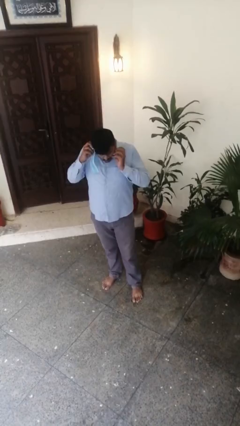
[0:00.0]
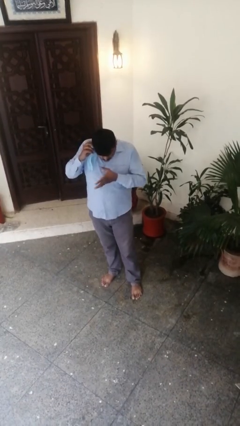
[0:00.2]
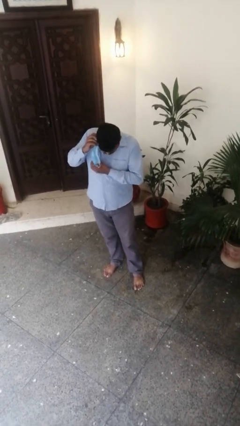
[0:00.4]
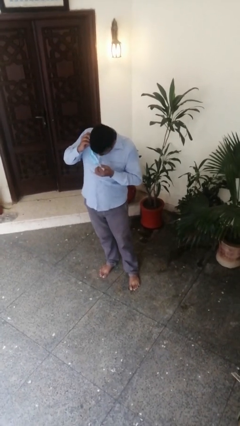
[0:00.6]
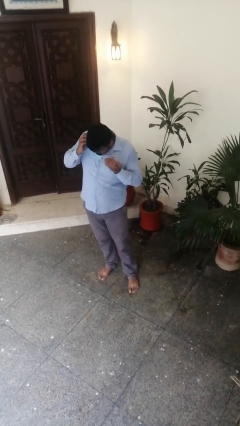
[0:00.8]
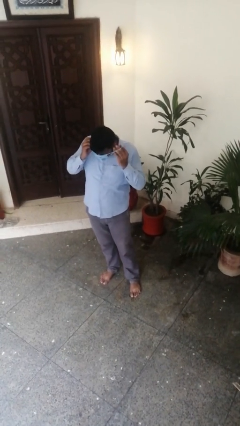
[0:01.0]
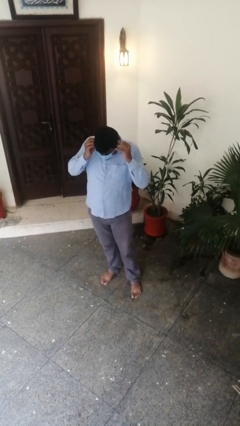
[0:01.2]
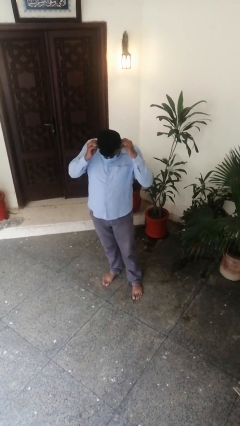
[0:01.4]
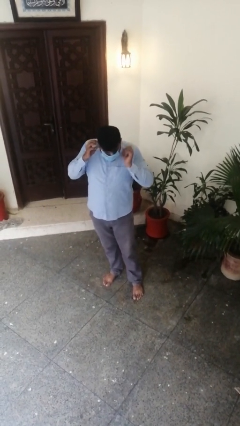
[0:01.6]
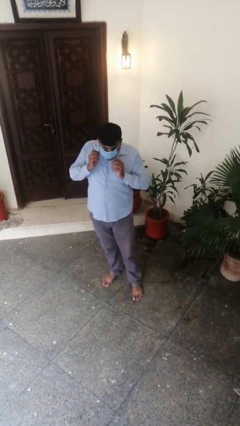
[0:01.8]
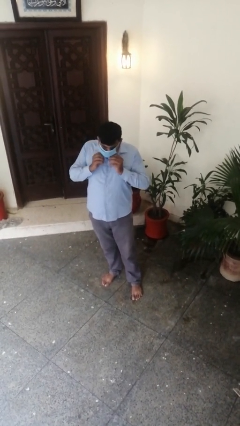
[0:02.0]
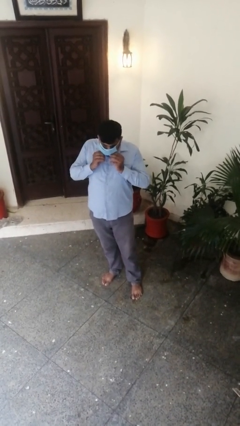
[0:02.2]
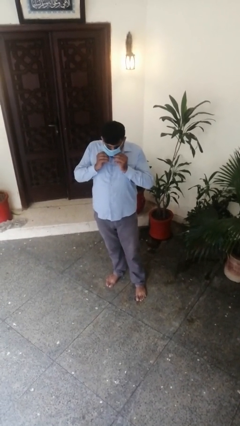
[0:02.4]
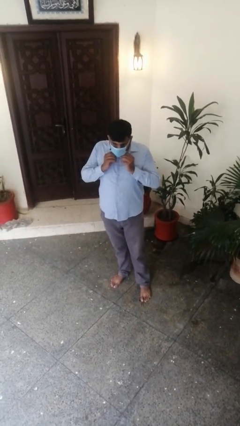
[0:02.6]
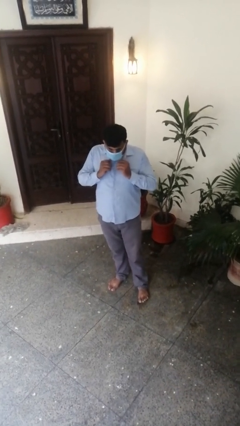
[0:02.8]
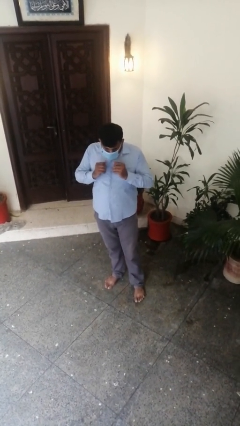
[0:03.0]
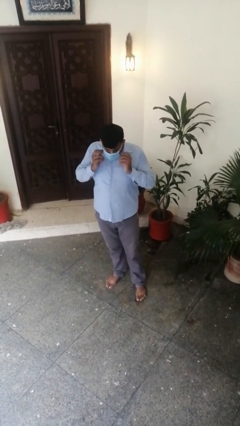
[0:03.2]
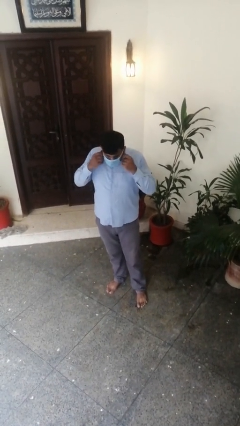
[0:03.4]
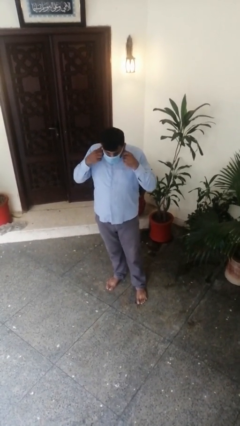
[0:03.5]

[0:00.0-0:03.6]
person puts on facemask

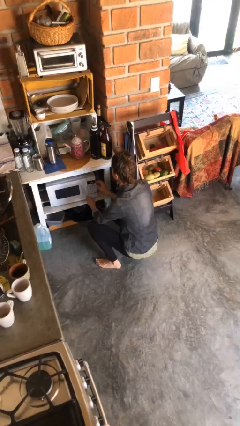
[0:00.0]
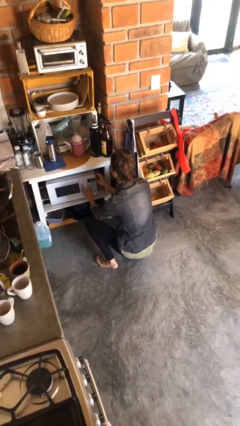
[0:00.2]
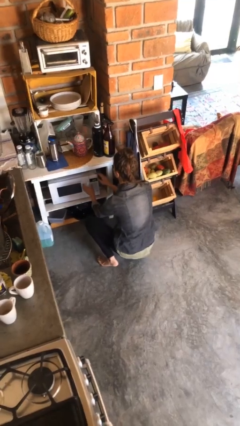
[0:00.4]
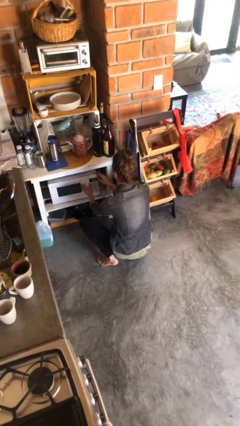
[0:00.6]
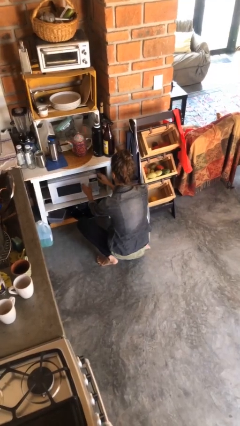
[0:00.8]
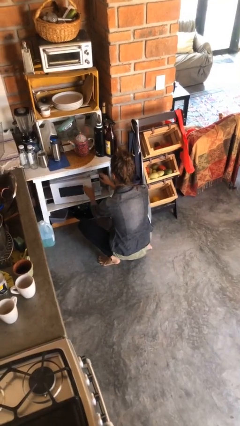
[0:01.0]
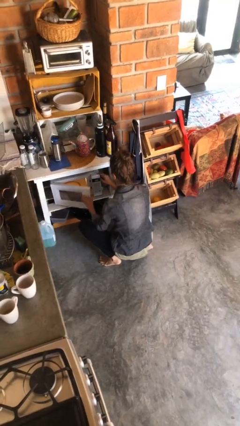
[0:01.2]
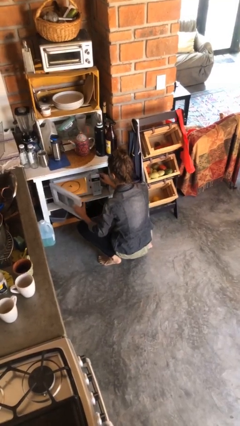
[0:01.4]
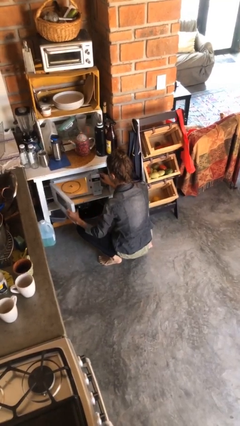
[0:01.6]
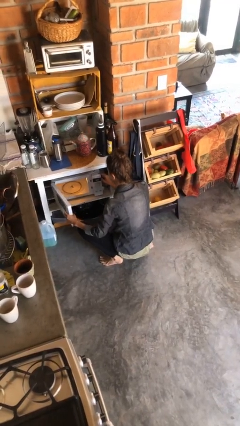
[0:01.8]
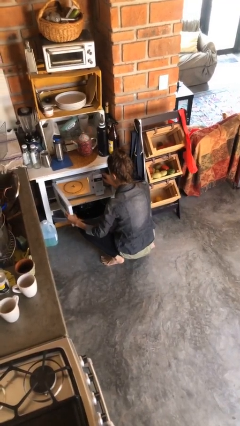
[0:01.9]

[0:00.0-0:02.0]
person opens microwave

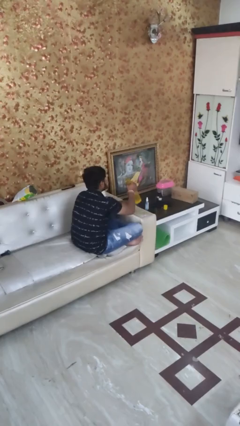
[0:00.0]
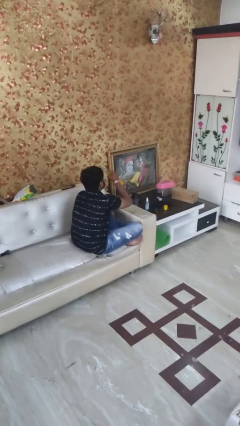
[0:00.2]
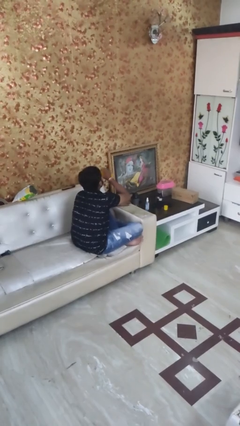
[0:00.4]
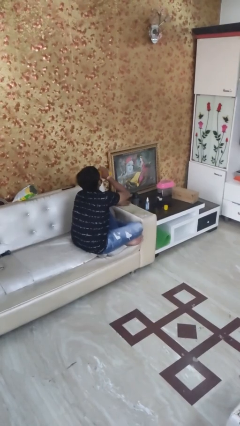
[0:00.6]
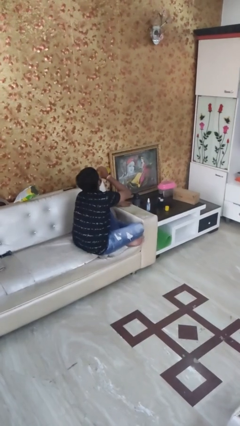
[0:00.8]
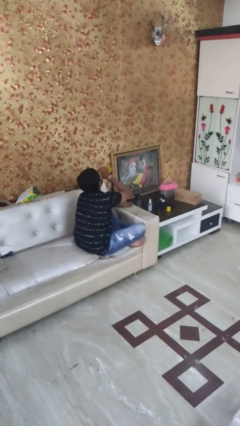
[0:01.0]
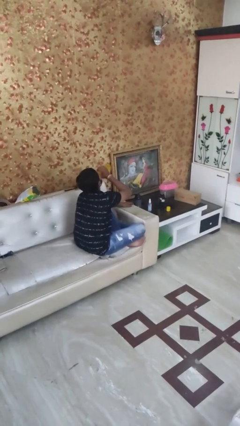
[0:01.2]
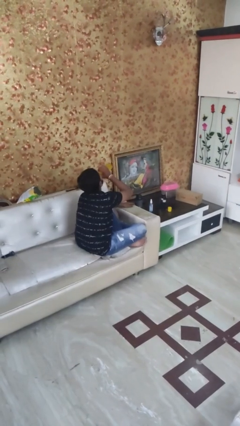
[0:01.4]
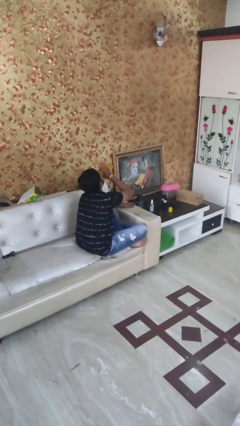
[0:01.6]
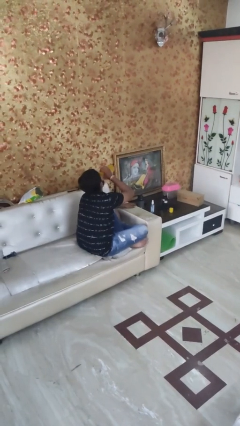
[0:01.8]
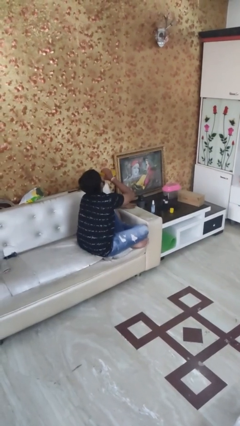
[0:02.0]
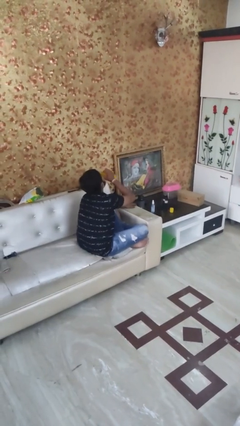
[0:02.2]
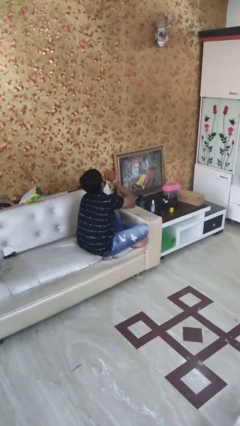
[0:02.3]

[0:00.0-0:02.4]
person drinks from bottle

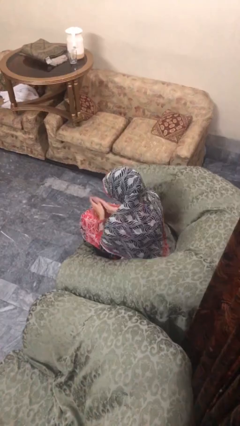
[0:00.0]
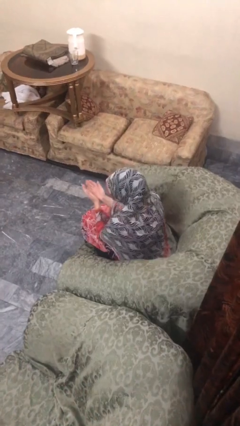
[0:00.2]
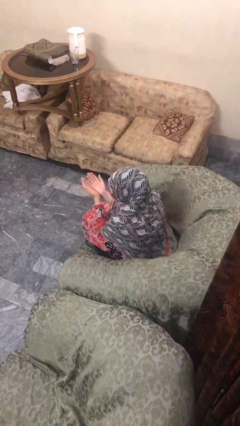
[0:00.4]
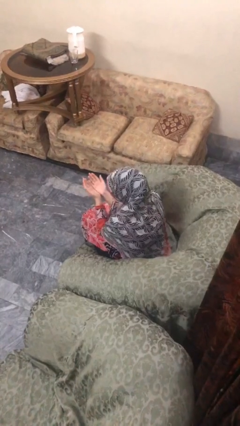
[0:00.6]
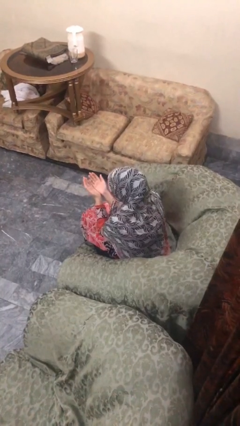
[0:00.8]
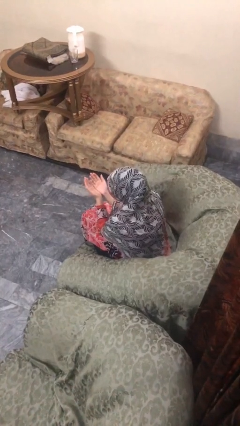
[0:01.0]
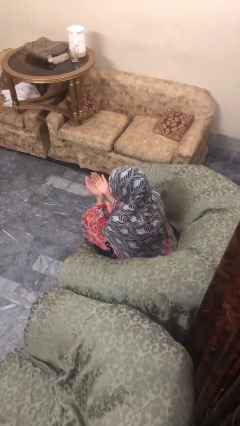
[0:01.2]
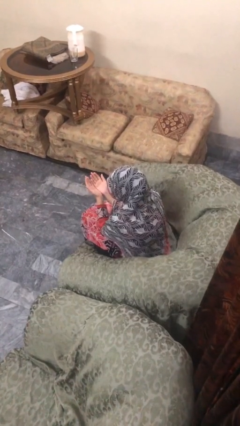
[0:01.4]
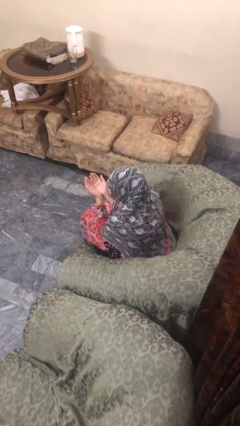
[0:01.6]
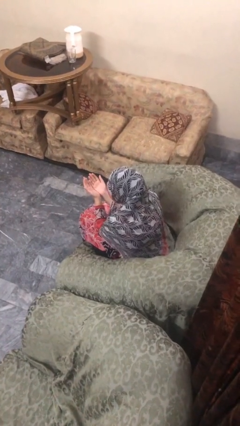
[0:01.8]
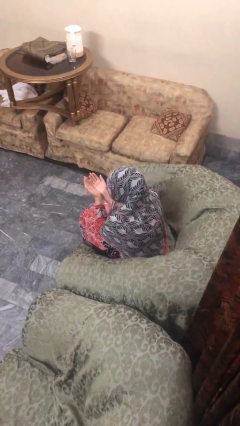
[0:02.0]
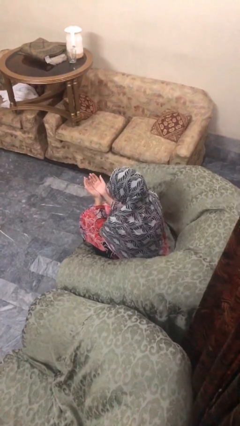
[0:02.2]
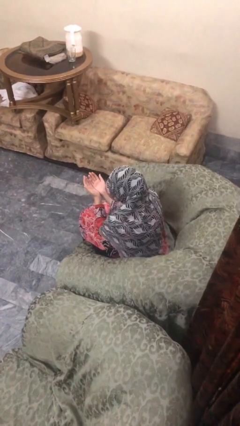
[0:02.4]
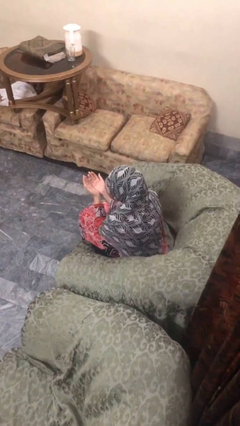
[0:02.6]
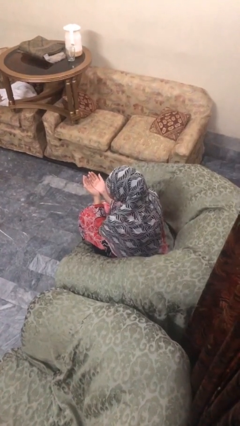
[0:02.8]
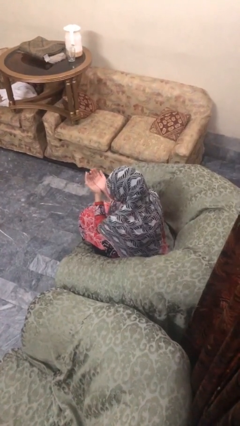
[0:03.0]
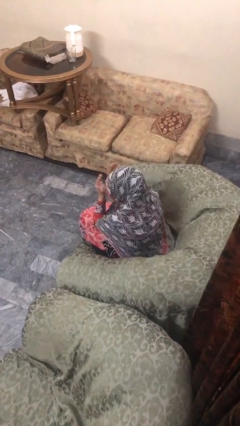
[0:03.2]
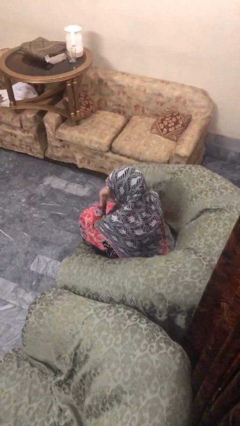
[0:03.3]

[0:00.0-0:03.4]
person prays

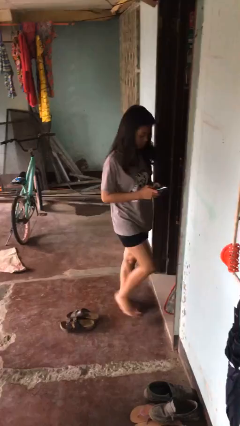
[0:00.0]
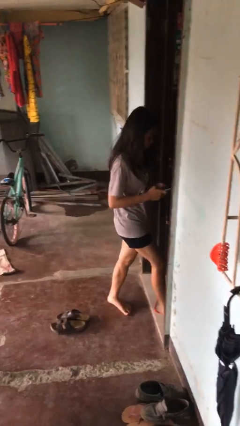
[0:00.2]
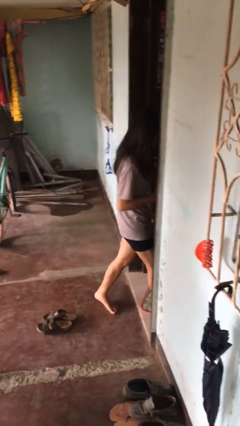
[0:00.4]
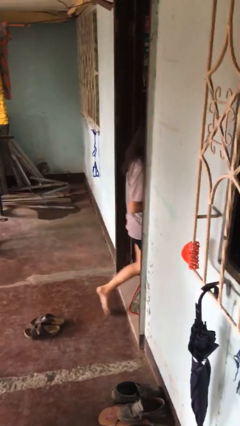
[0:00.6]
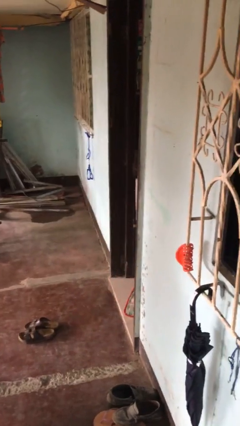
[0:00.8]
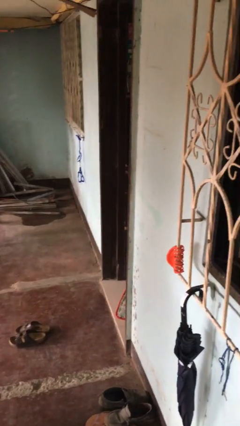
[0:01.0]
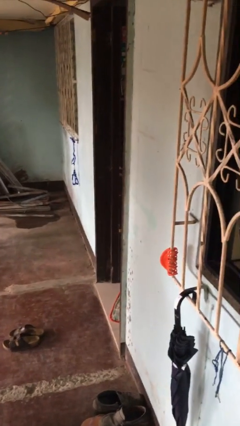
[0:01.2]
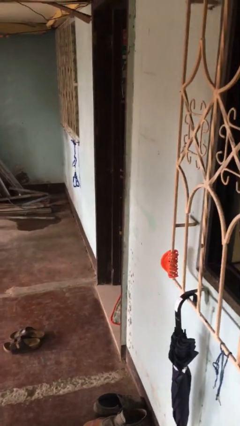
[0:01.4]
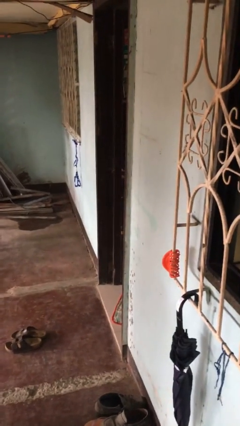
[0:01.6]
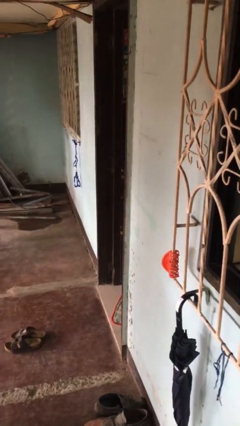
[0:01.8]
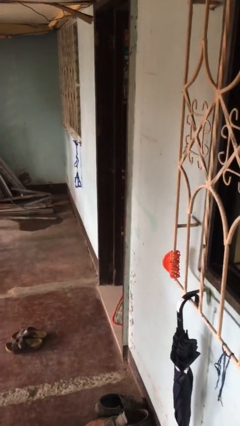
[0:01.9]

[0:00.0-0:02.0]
person exits scene through structure

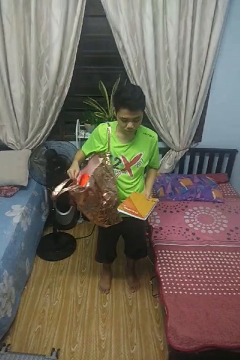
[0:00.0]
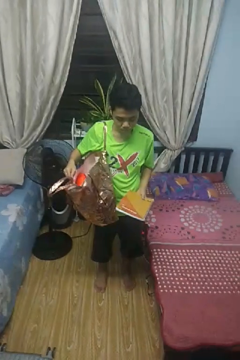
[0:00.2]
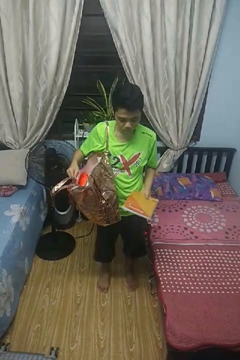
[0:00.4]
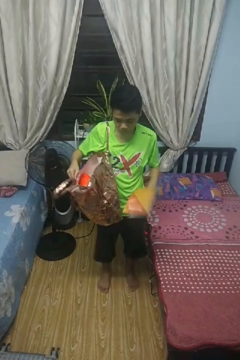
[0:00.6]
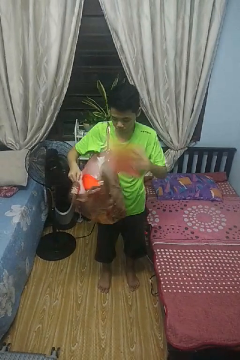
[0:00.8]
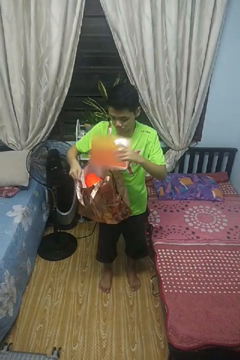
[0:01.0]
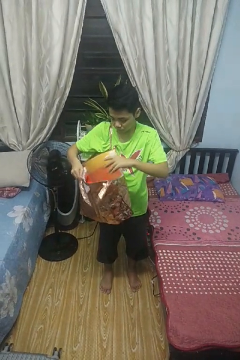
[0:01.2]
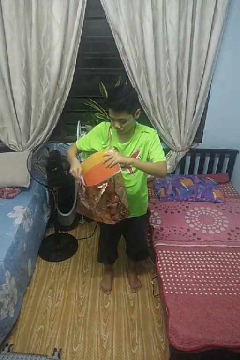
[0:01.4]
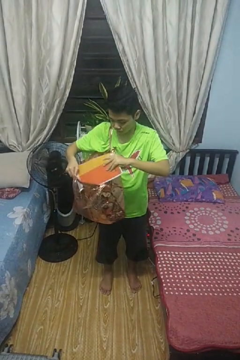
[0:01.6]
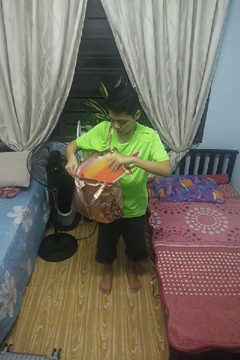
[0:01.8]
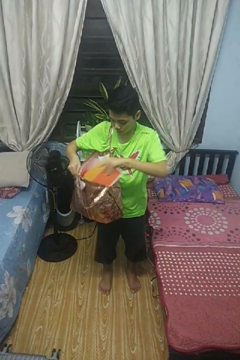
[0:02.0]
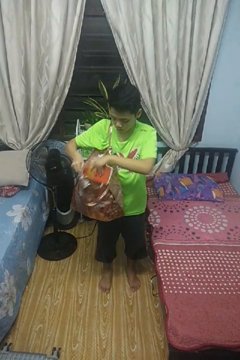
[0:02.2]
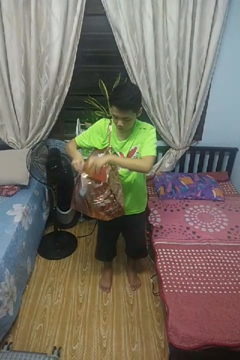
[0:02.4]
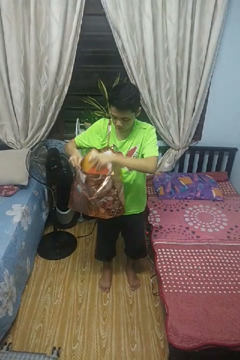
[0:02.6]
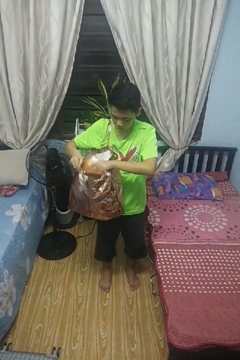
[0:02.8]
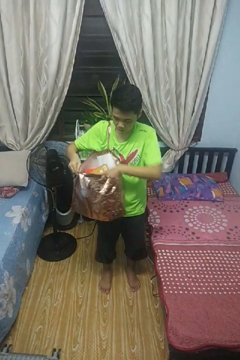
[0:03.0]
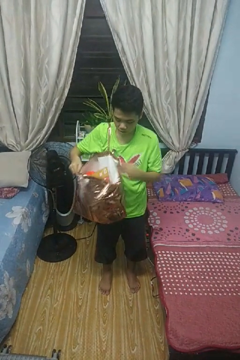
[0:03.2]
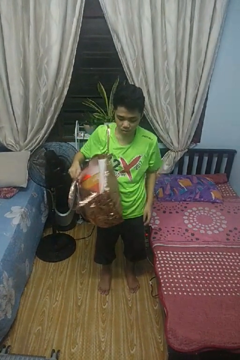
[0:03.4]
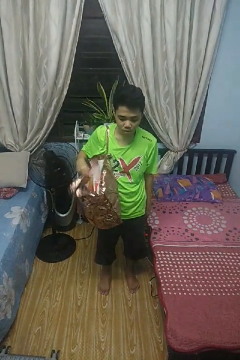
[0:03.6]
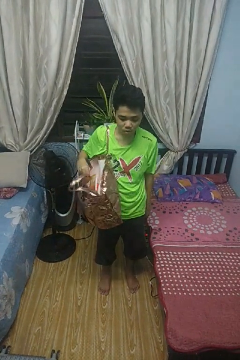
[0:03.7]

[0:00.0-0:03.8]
person puts object into bag

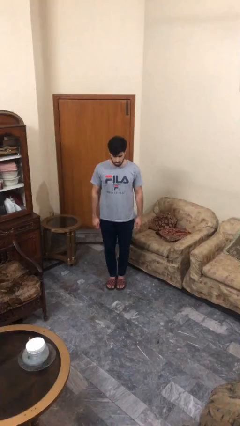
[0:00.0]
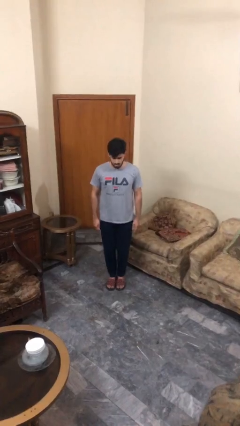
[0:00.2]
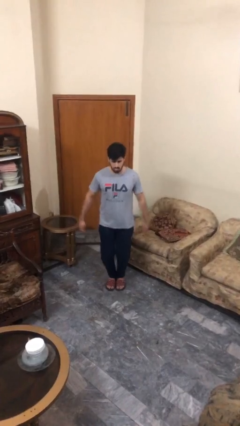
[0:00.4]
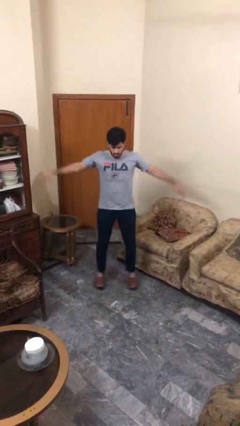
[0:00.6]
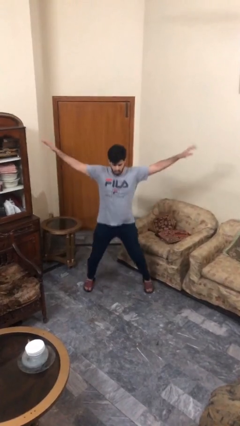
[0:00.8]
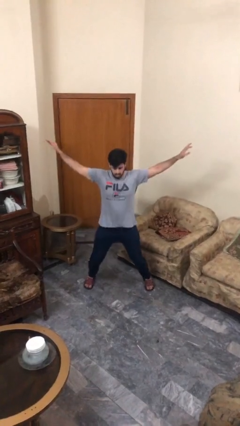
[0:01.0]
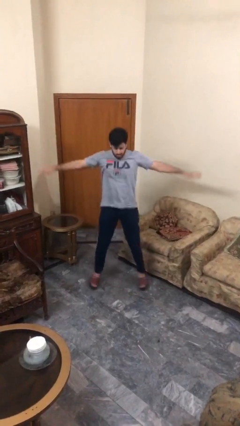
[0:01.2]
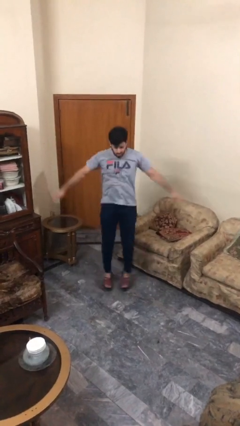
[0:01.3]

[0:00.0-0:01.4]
person exercises with jumping jacks
